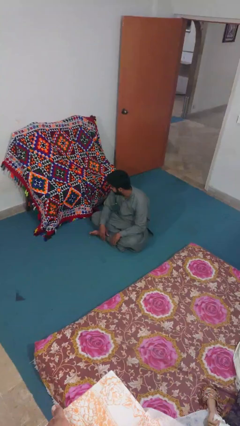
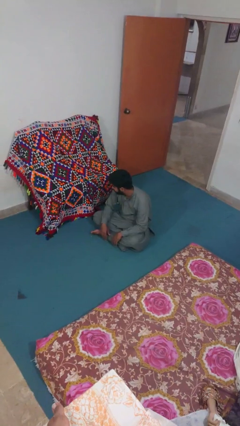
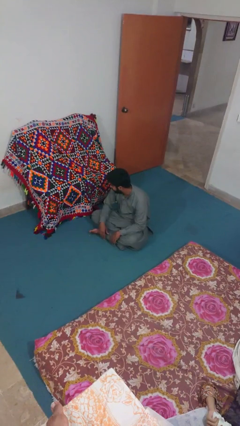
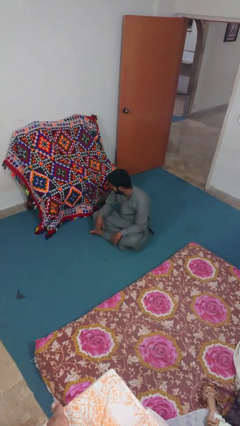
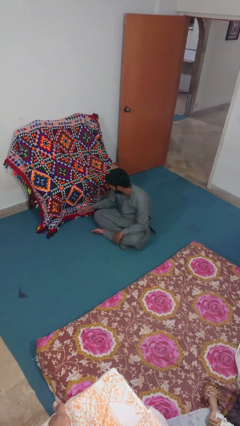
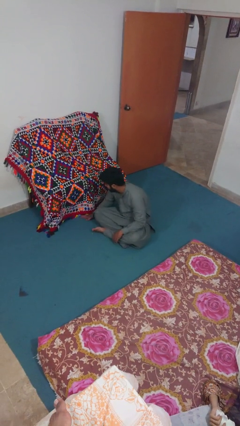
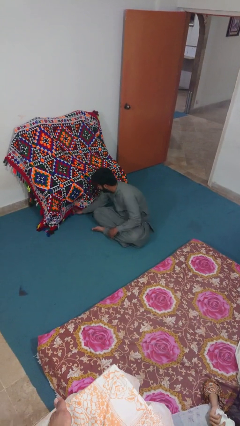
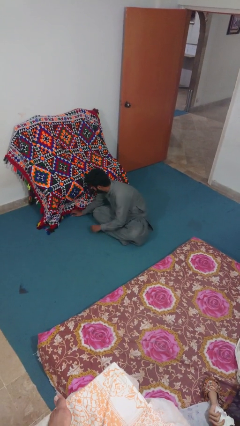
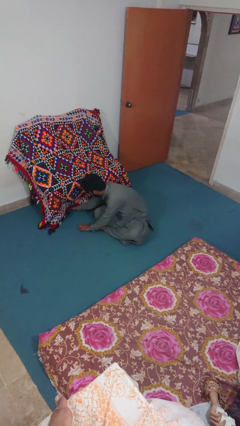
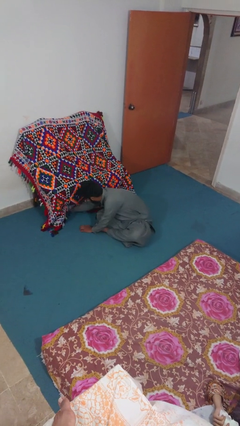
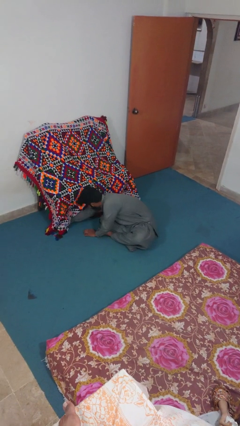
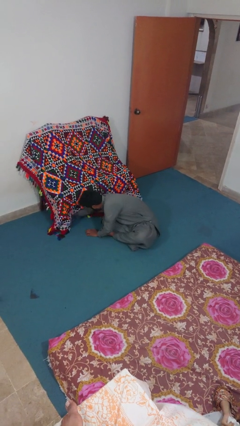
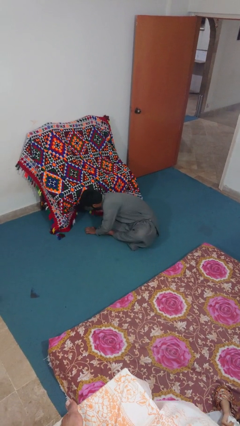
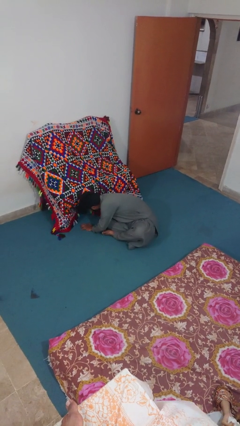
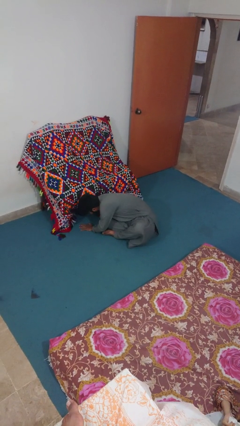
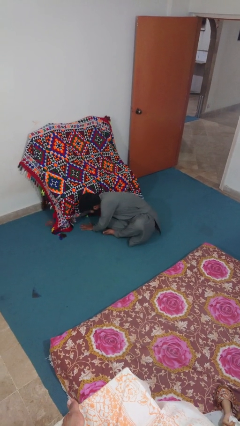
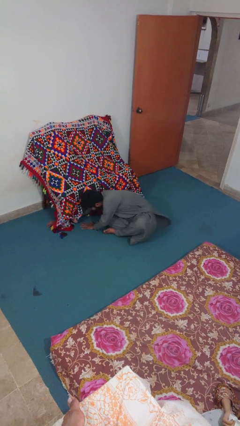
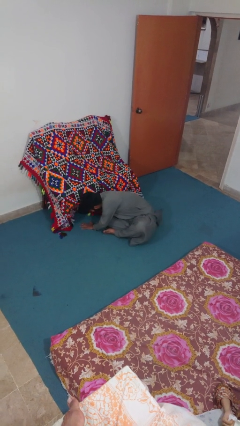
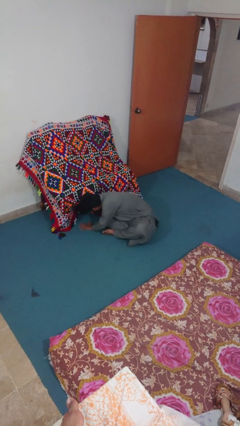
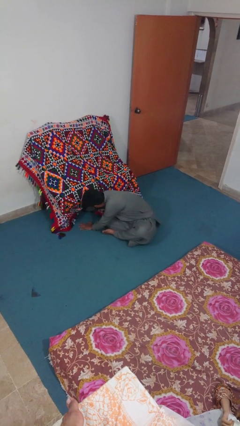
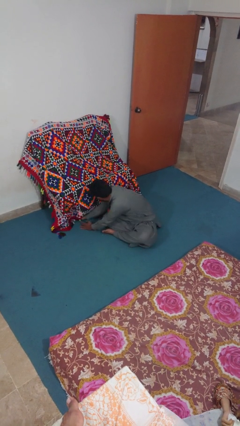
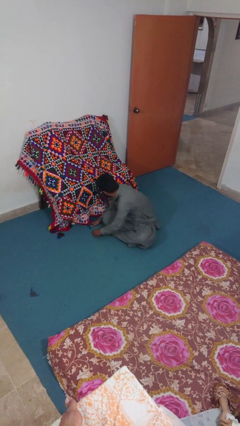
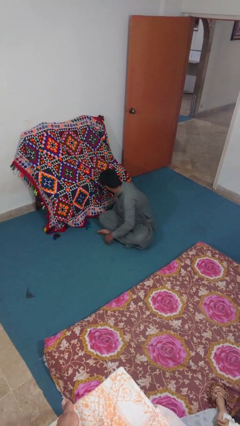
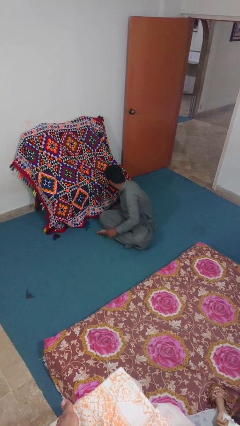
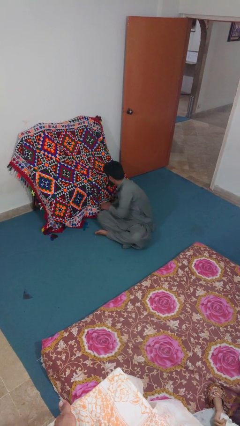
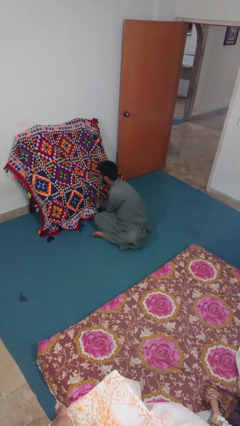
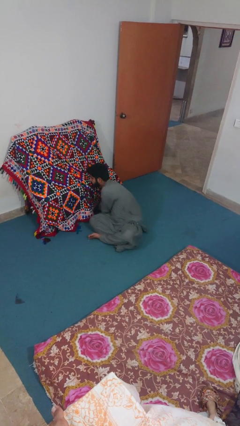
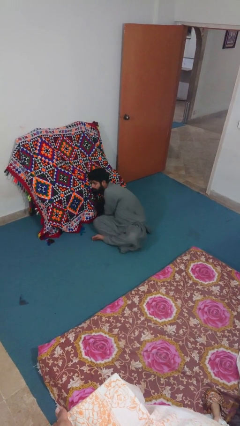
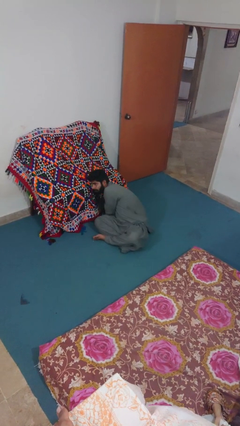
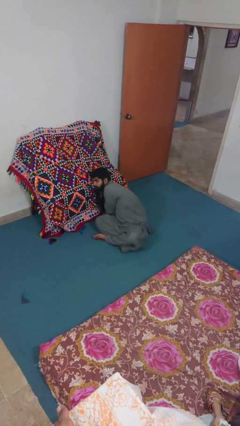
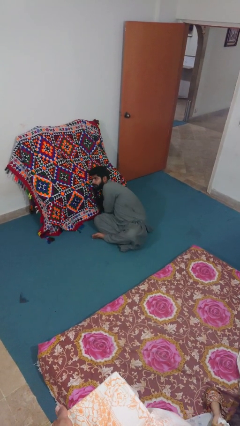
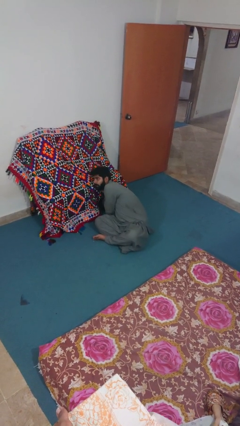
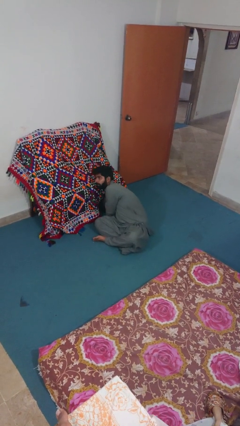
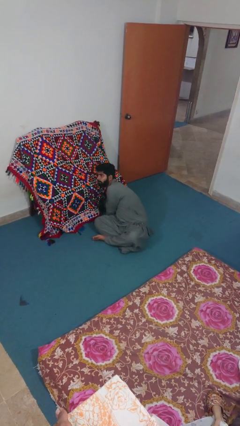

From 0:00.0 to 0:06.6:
person searches under couch

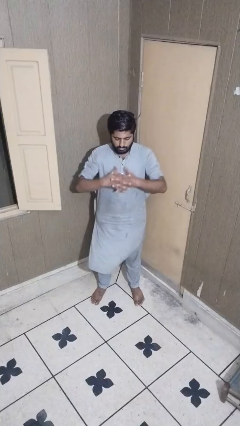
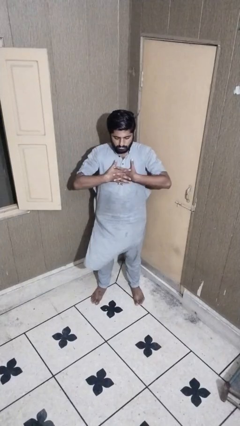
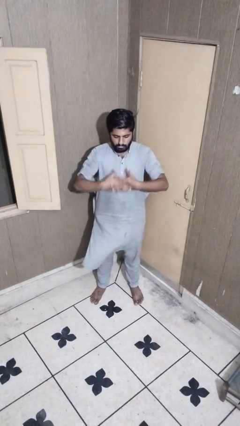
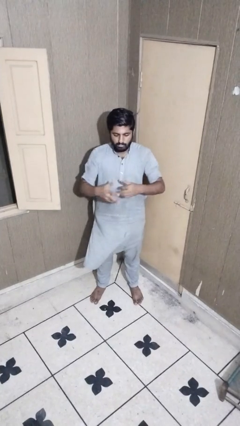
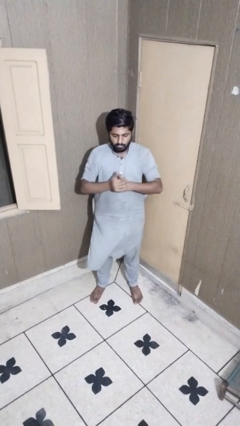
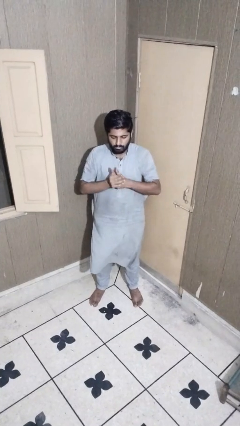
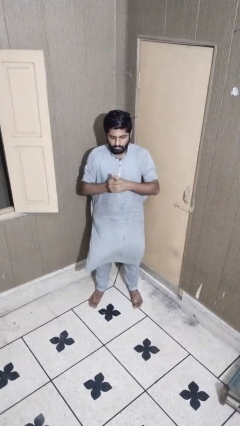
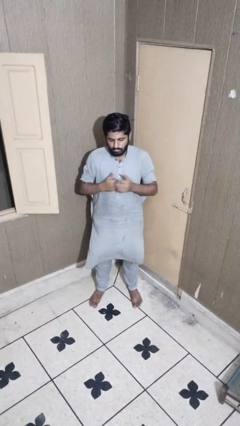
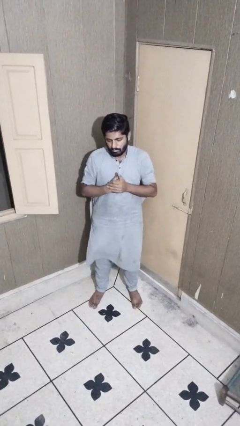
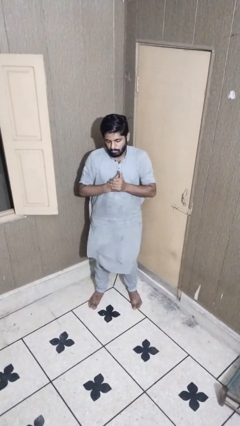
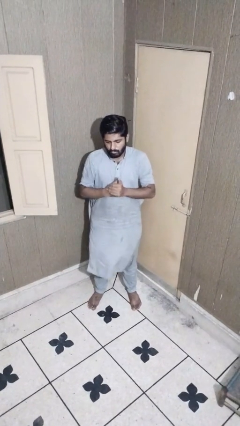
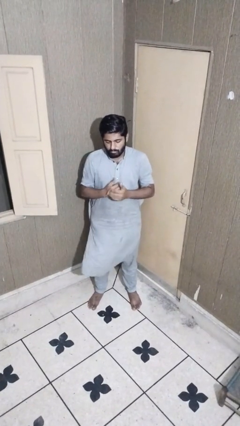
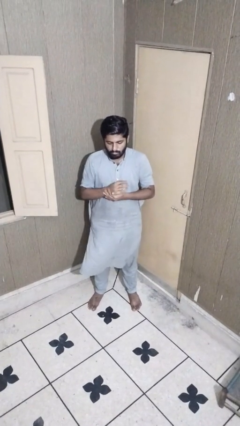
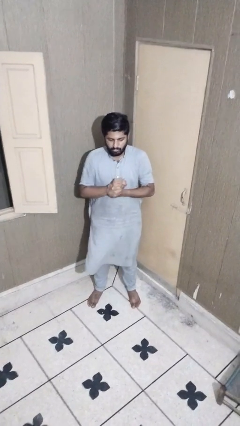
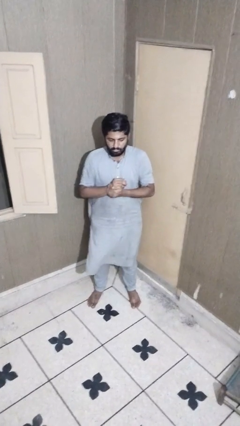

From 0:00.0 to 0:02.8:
person cracks knuckles

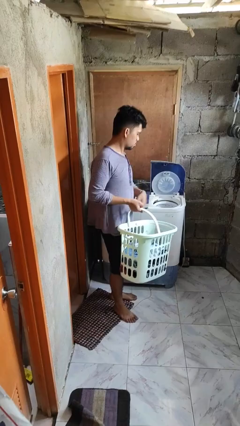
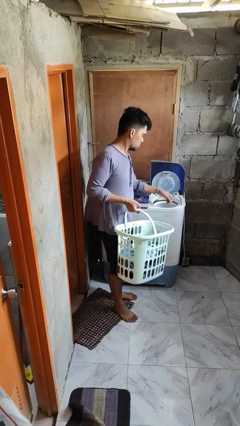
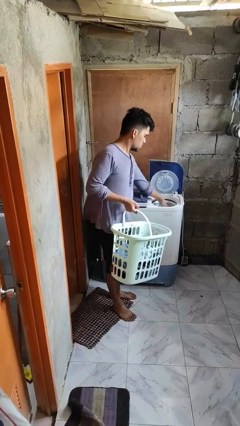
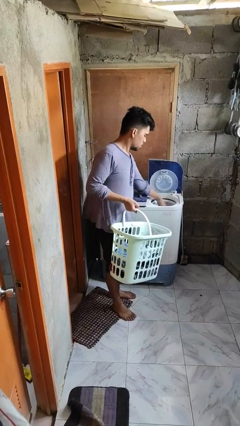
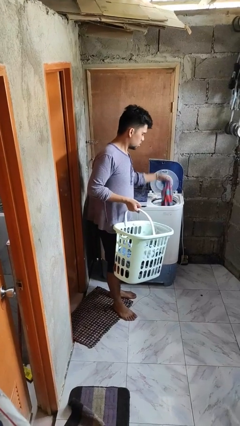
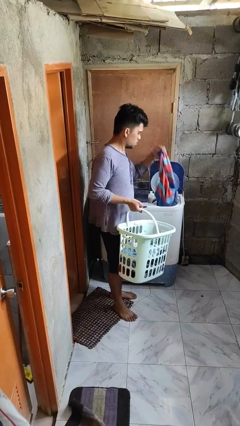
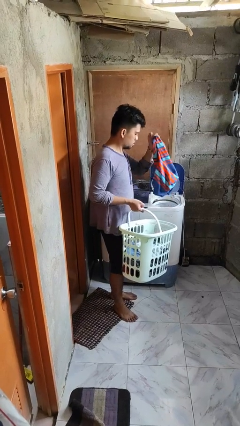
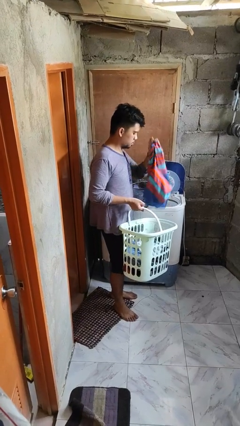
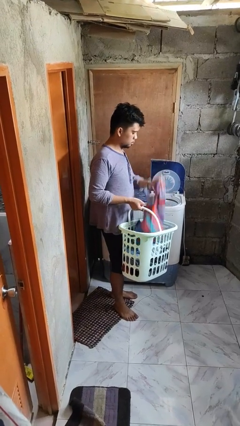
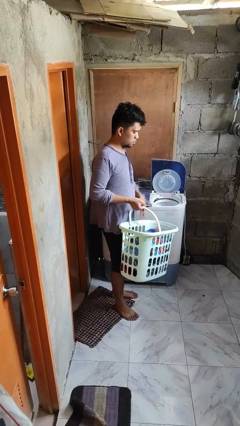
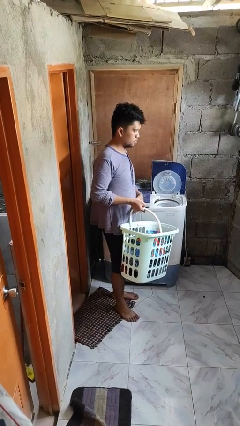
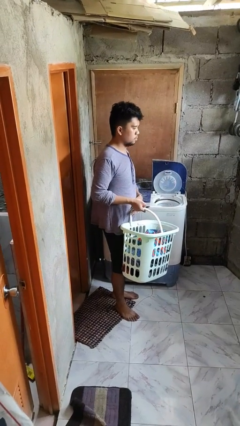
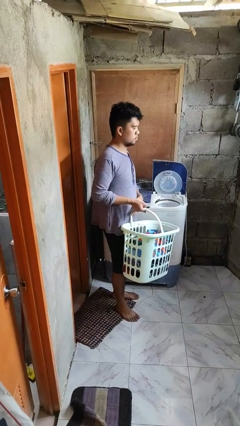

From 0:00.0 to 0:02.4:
person unloads dryer

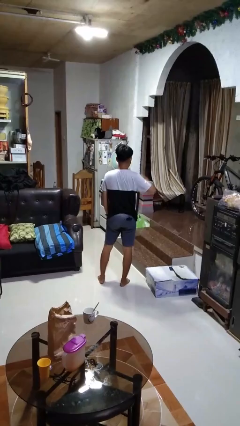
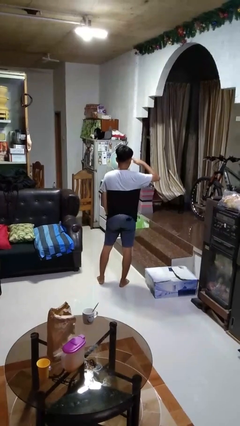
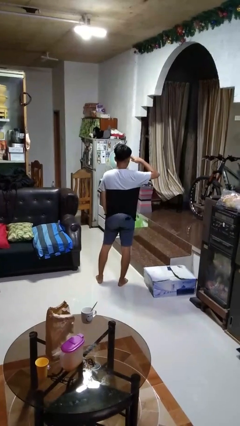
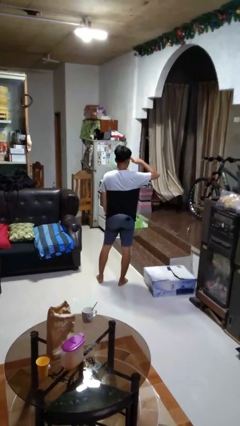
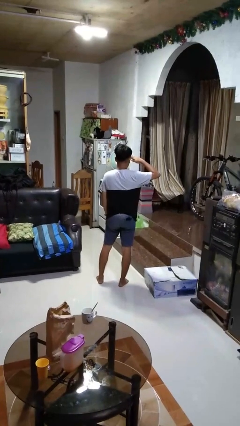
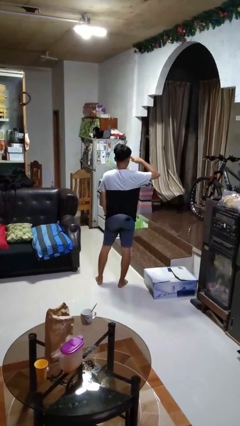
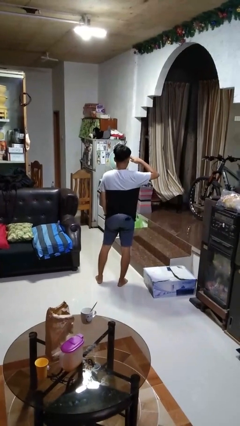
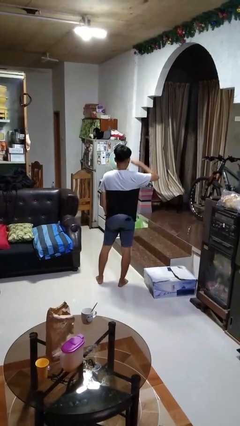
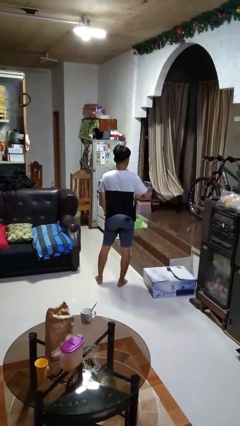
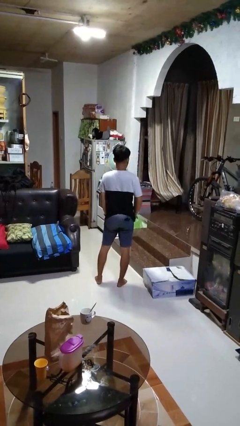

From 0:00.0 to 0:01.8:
person salutes

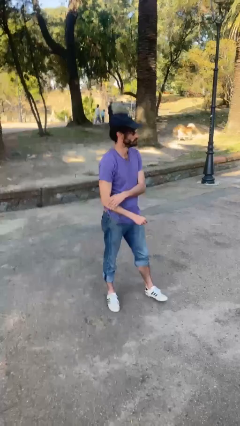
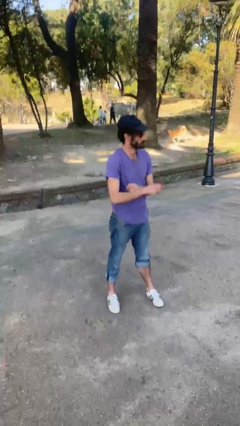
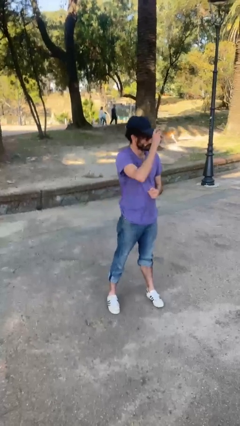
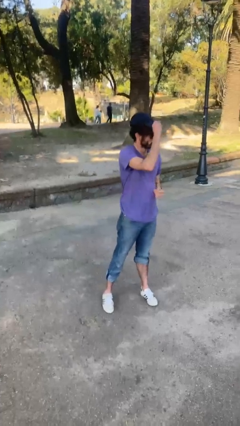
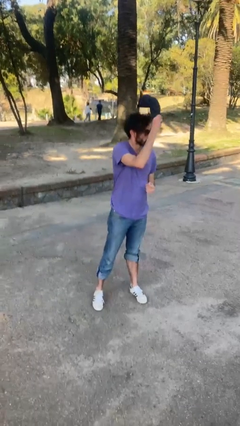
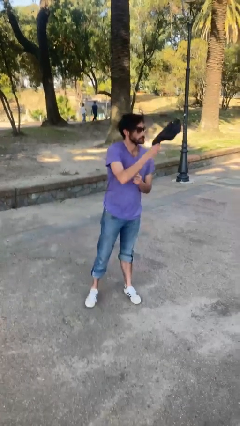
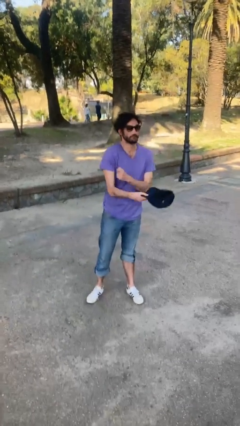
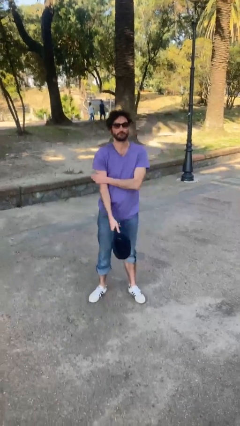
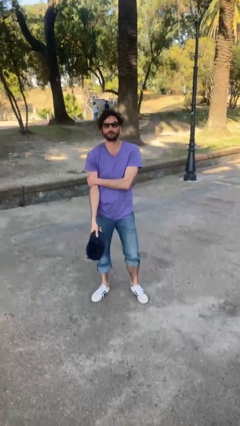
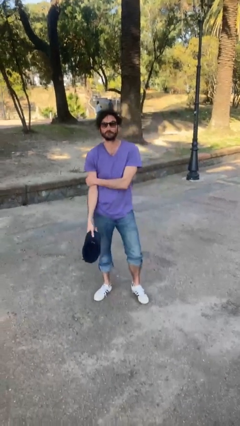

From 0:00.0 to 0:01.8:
person takes off hat

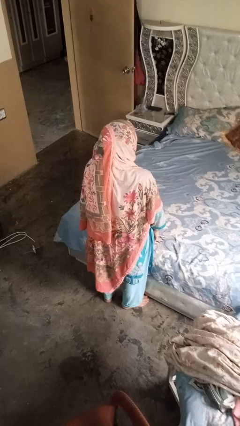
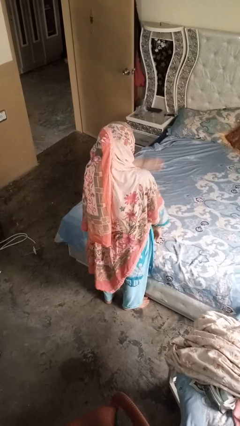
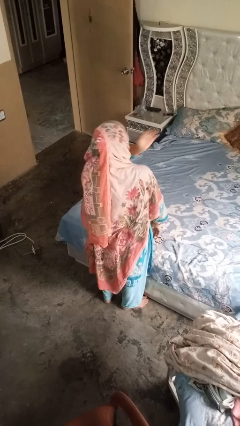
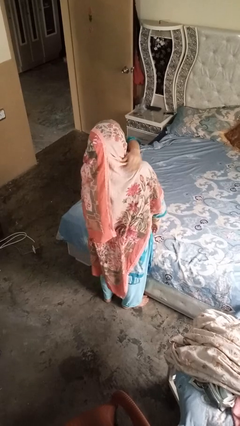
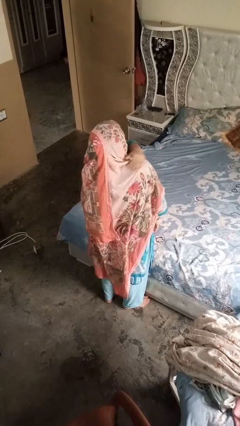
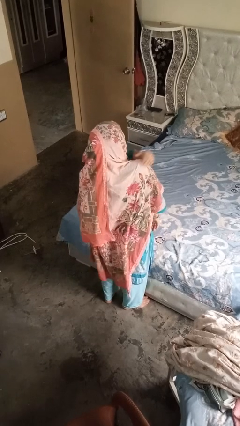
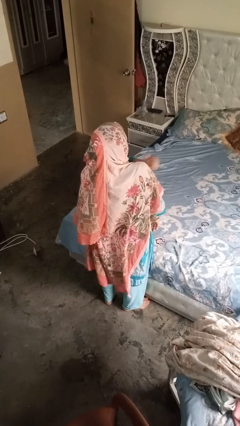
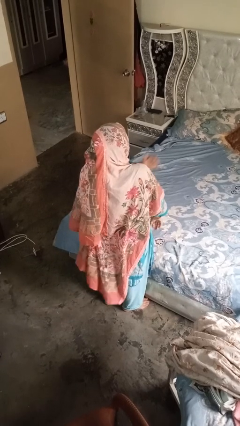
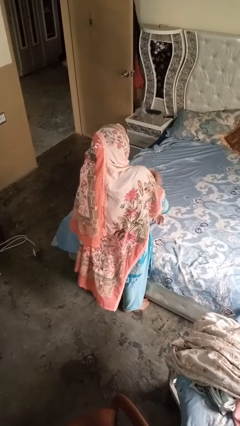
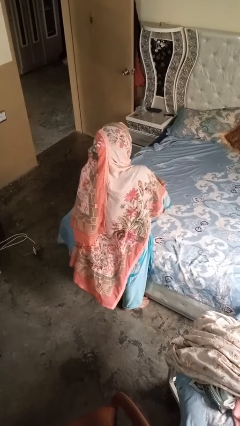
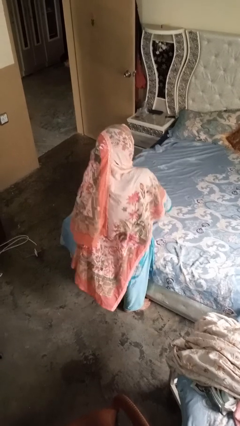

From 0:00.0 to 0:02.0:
person swats bug
